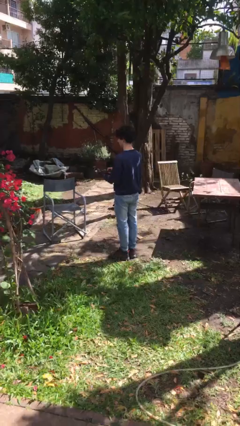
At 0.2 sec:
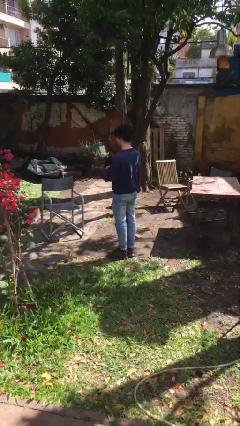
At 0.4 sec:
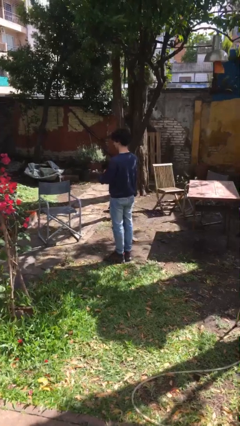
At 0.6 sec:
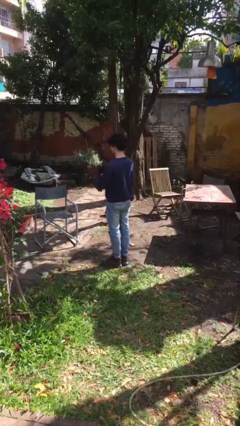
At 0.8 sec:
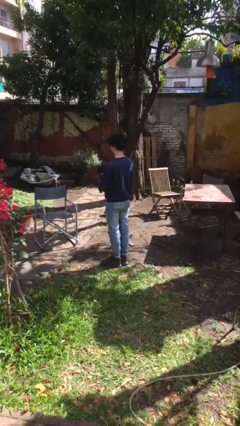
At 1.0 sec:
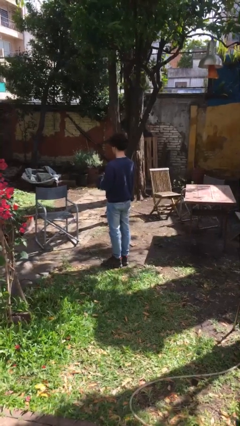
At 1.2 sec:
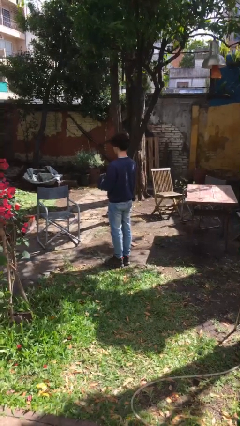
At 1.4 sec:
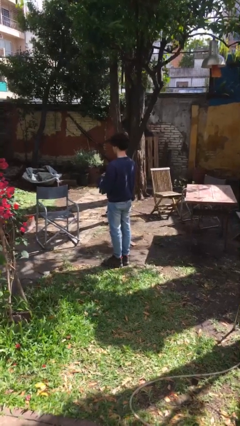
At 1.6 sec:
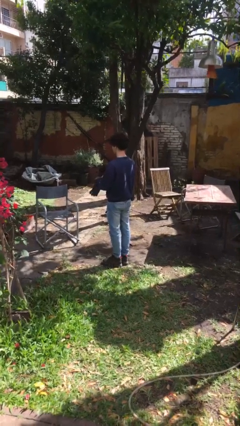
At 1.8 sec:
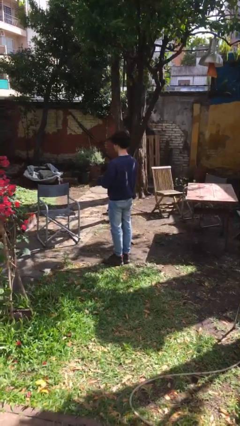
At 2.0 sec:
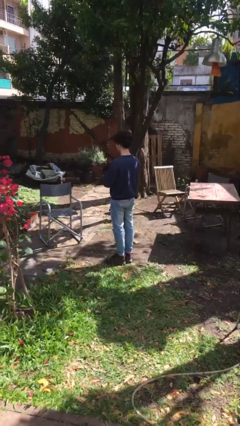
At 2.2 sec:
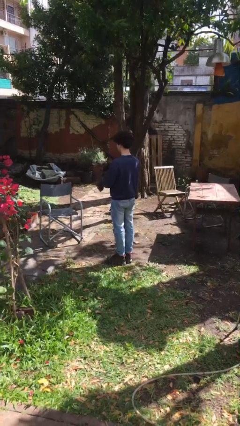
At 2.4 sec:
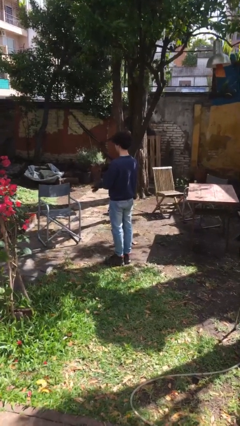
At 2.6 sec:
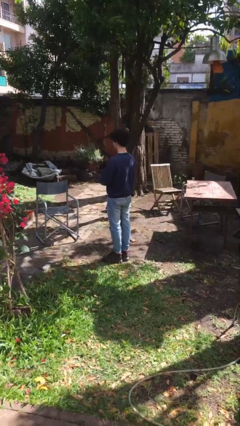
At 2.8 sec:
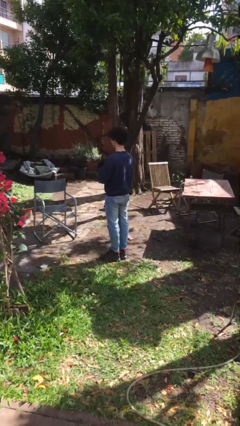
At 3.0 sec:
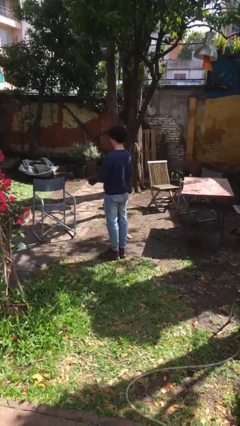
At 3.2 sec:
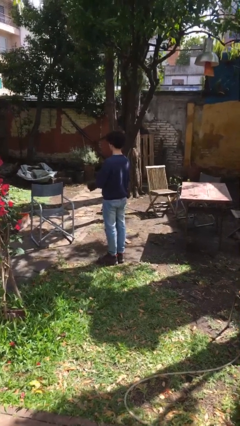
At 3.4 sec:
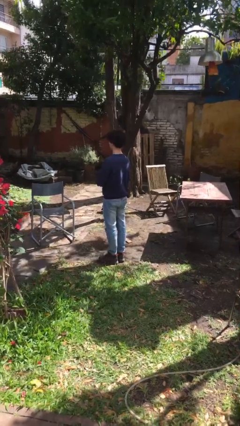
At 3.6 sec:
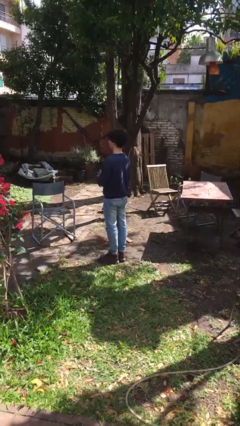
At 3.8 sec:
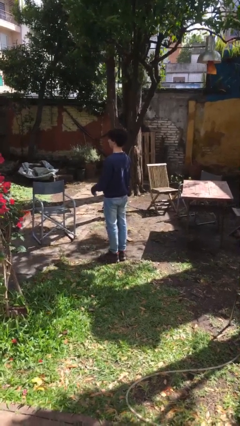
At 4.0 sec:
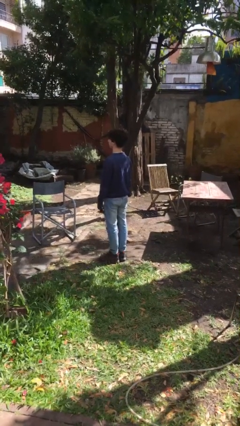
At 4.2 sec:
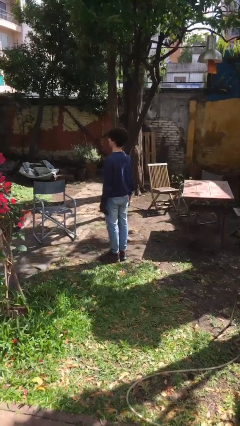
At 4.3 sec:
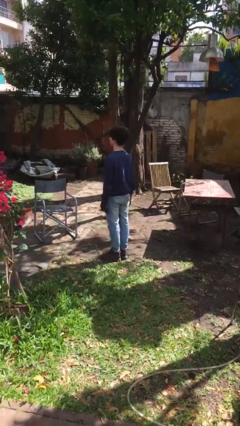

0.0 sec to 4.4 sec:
person puts on gloves

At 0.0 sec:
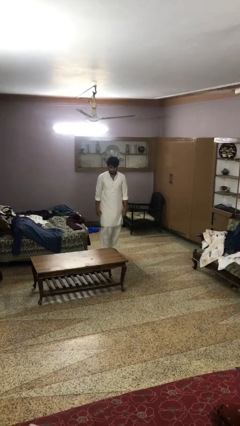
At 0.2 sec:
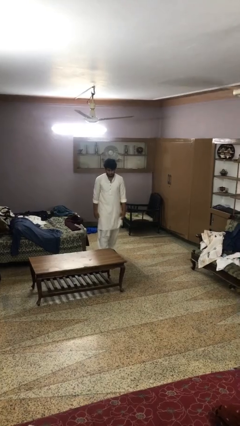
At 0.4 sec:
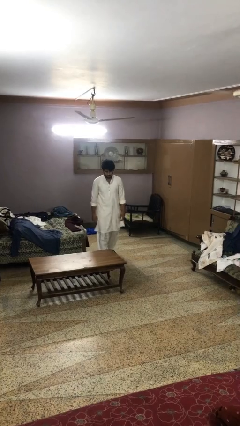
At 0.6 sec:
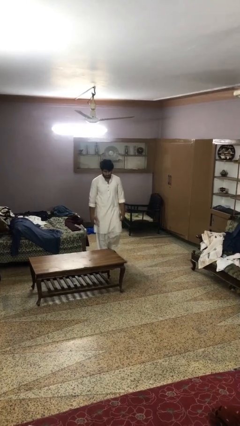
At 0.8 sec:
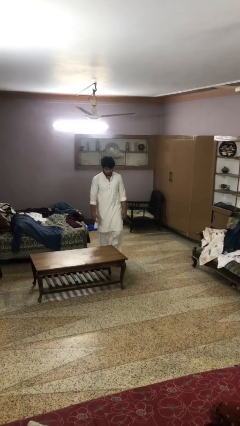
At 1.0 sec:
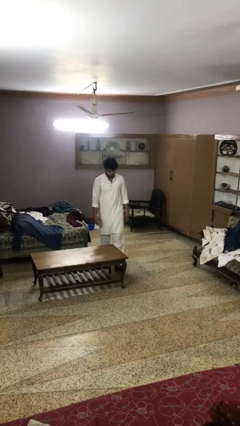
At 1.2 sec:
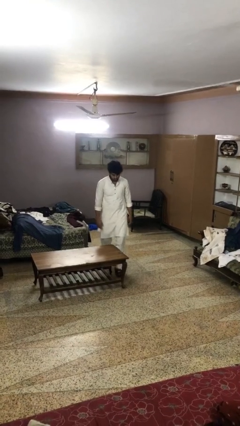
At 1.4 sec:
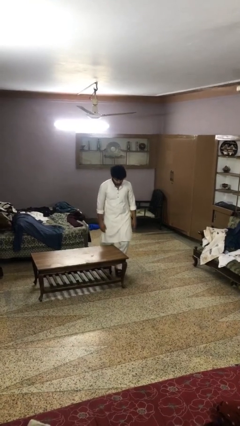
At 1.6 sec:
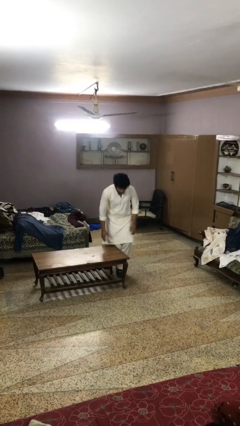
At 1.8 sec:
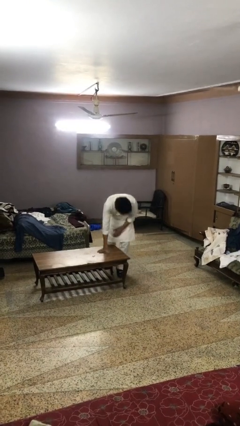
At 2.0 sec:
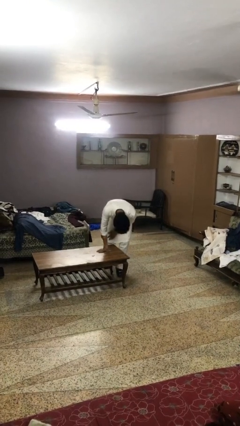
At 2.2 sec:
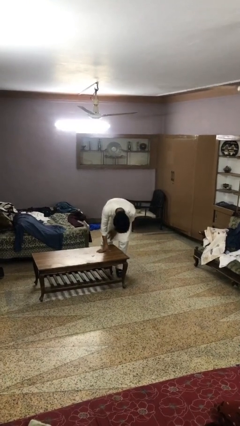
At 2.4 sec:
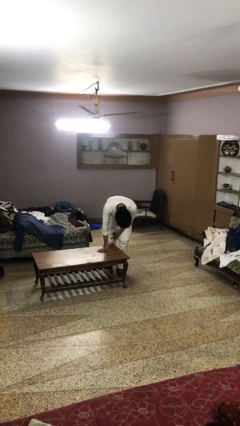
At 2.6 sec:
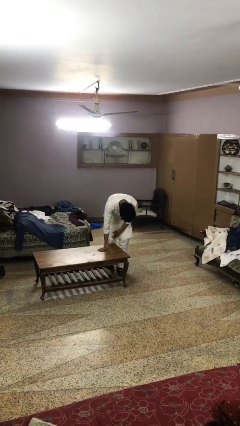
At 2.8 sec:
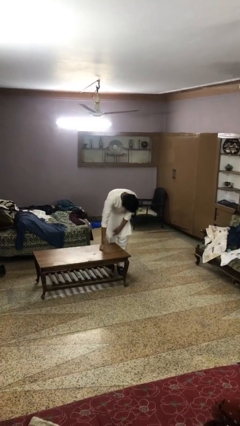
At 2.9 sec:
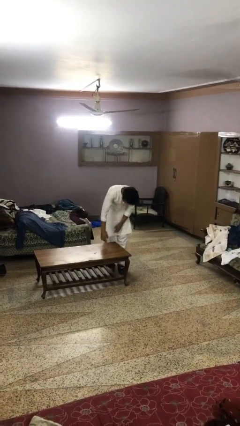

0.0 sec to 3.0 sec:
person bumps into table

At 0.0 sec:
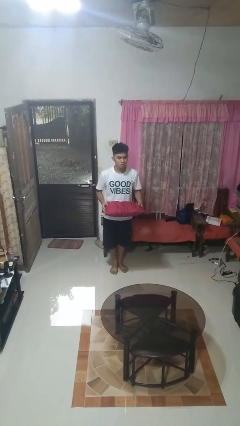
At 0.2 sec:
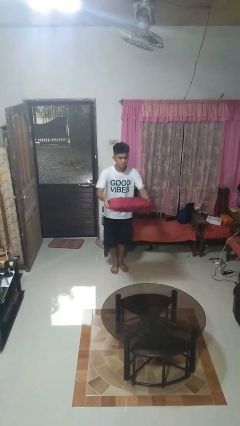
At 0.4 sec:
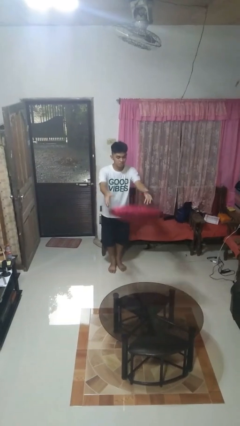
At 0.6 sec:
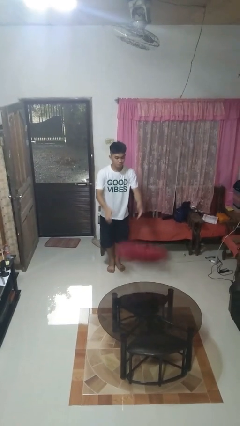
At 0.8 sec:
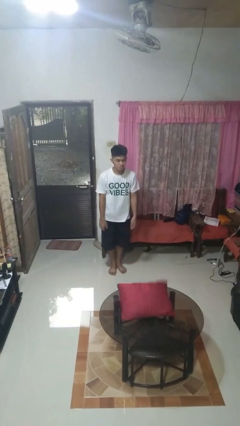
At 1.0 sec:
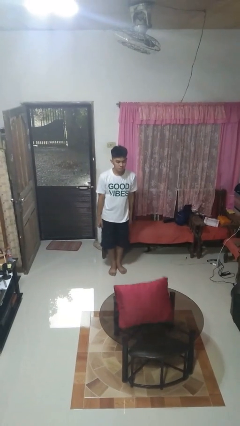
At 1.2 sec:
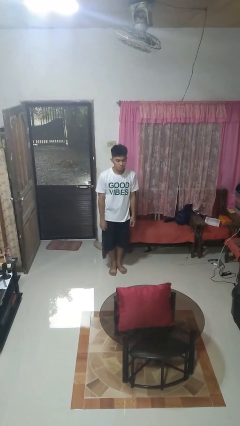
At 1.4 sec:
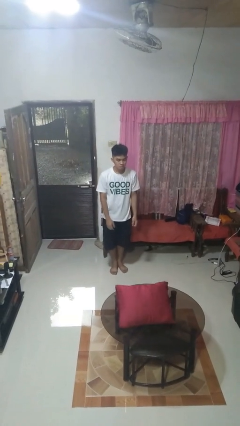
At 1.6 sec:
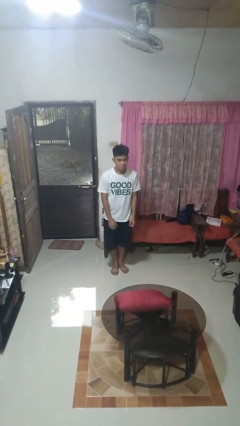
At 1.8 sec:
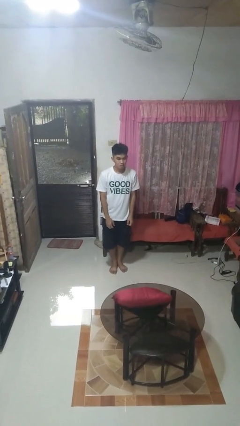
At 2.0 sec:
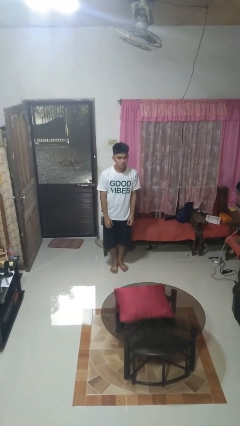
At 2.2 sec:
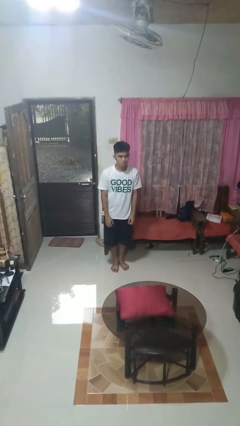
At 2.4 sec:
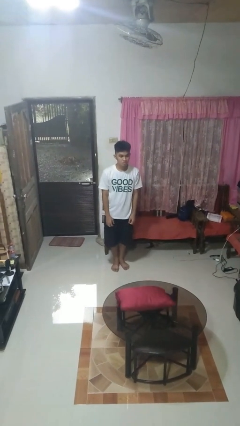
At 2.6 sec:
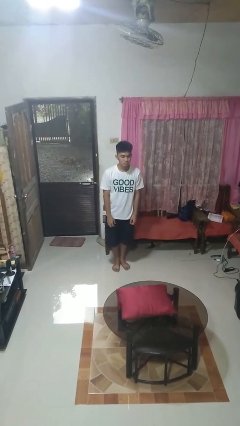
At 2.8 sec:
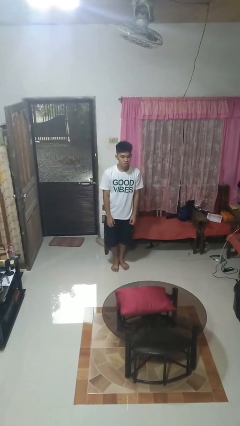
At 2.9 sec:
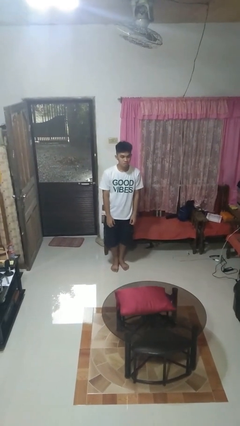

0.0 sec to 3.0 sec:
person throws object on table

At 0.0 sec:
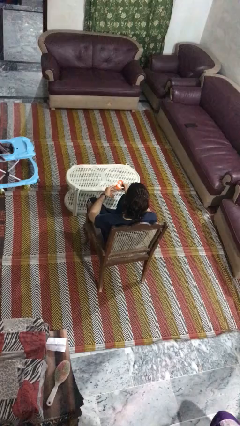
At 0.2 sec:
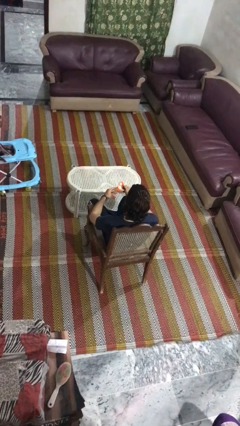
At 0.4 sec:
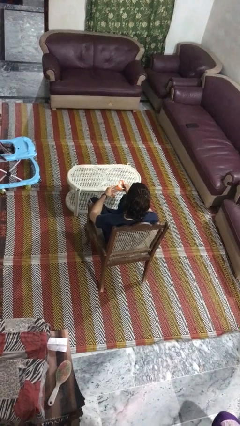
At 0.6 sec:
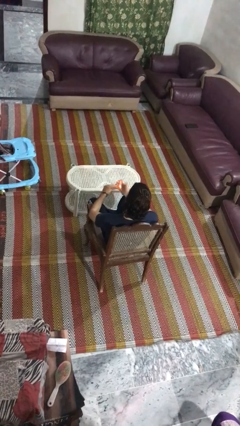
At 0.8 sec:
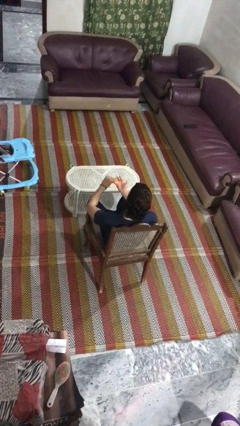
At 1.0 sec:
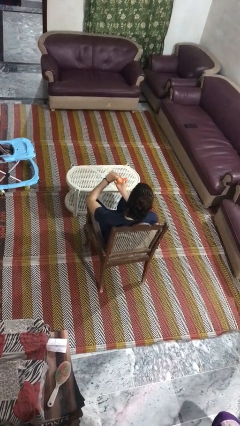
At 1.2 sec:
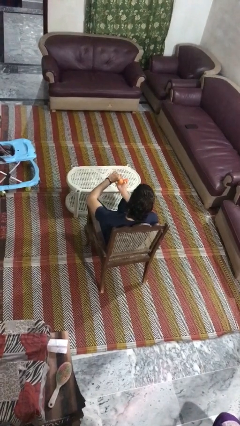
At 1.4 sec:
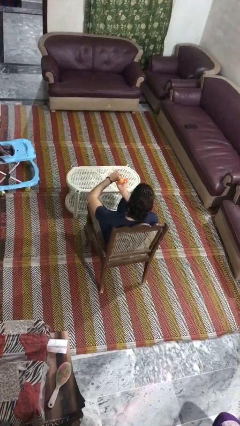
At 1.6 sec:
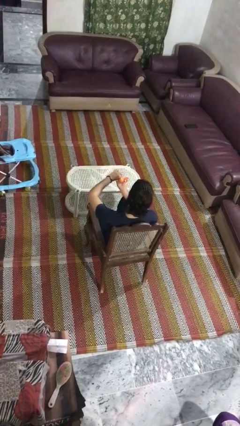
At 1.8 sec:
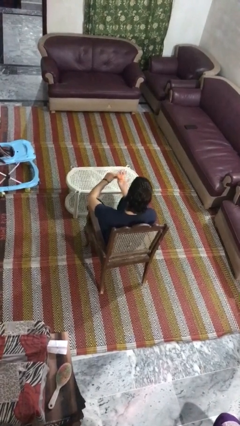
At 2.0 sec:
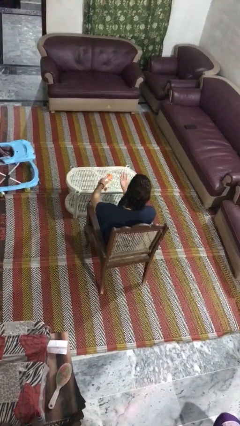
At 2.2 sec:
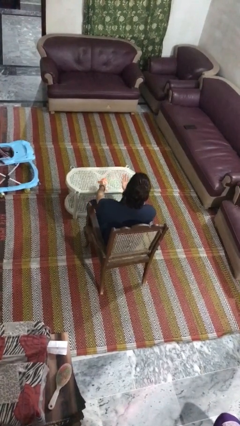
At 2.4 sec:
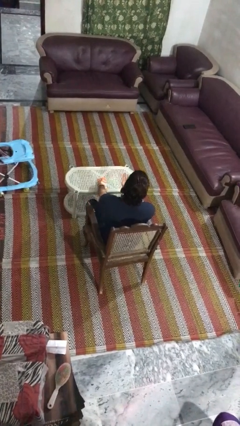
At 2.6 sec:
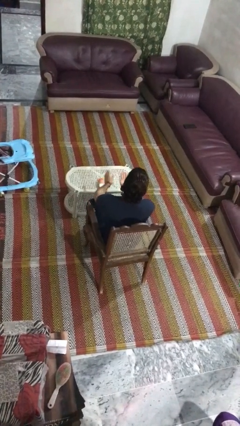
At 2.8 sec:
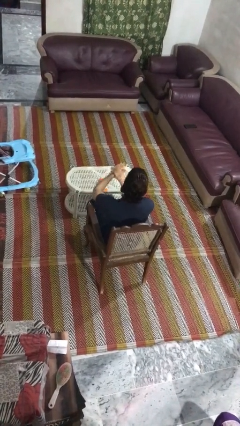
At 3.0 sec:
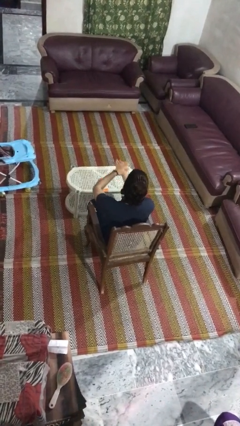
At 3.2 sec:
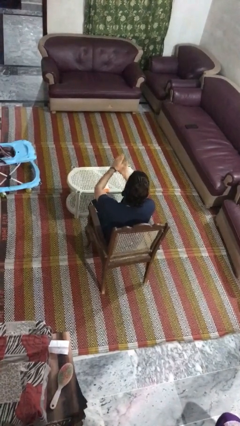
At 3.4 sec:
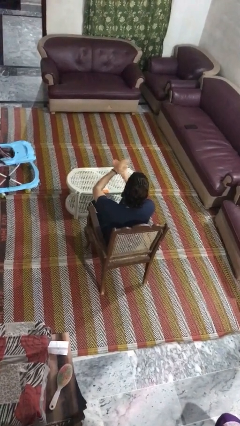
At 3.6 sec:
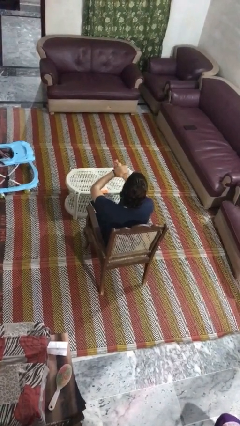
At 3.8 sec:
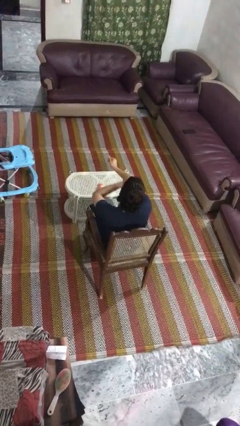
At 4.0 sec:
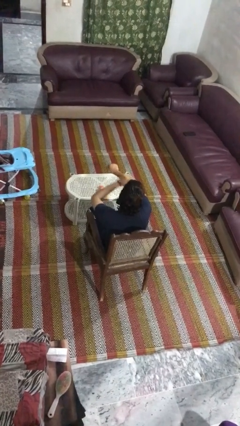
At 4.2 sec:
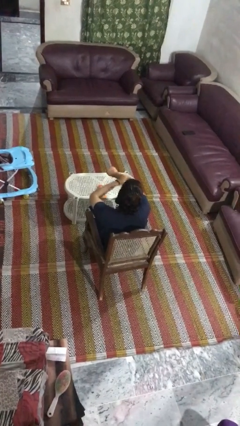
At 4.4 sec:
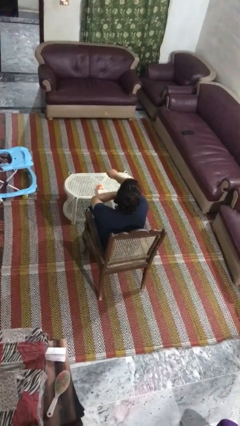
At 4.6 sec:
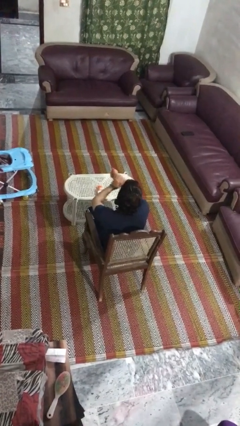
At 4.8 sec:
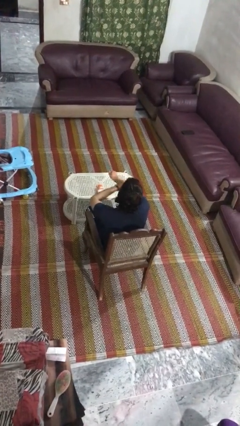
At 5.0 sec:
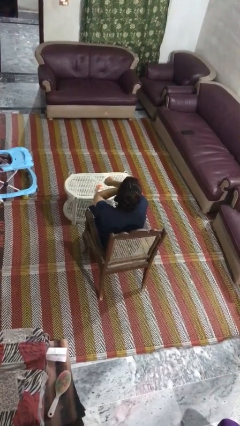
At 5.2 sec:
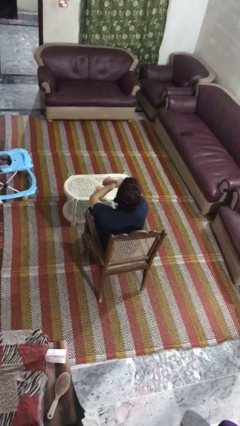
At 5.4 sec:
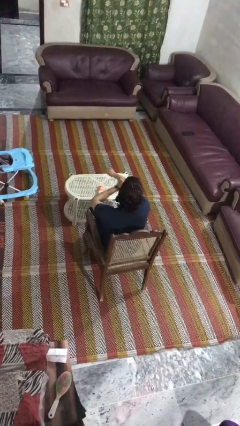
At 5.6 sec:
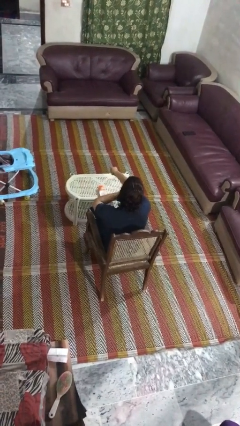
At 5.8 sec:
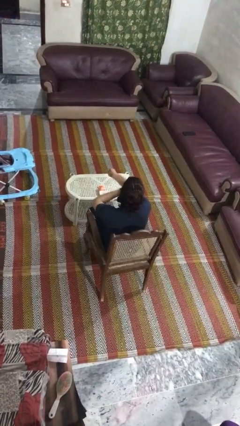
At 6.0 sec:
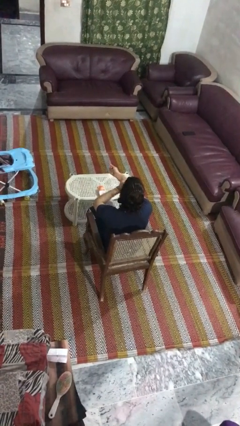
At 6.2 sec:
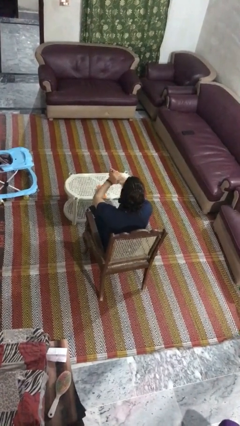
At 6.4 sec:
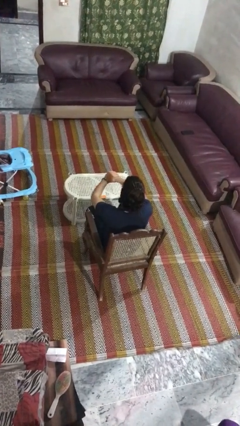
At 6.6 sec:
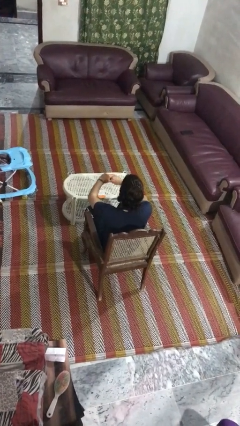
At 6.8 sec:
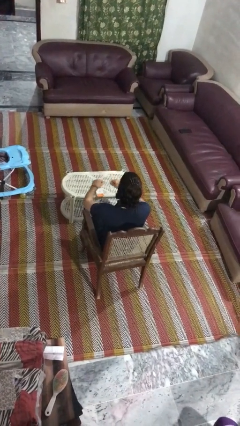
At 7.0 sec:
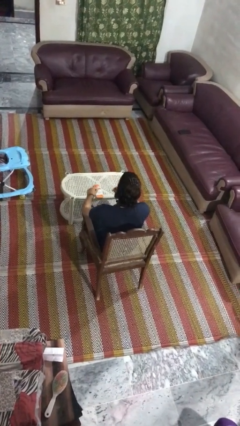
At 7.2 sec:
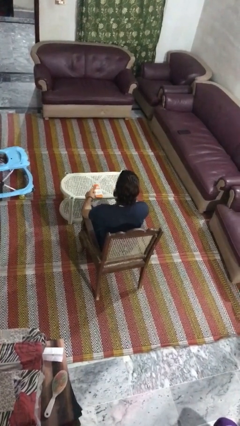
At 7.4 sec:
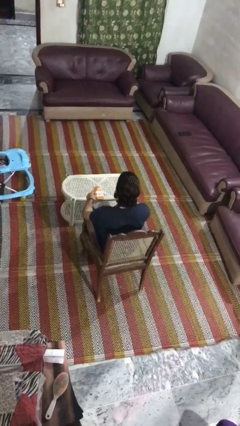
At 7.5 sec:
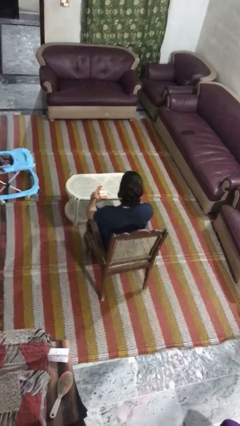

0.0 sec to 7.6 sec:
person applies sunscreen
